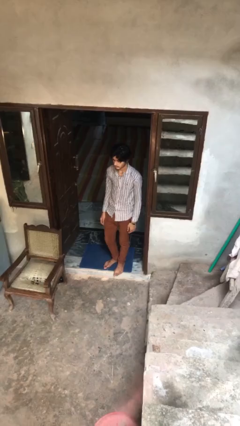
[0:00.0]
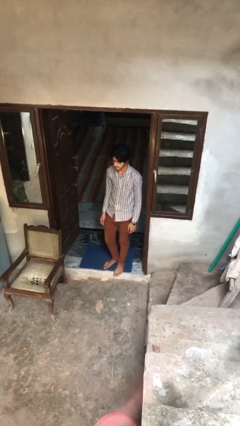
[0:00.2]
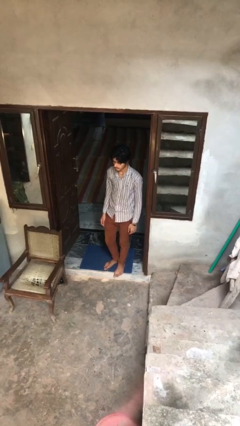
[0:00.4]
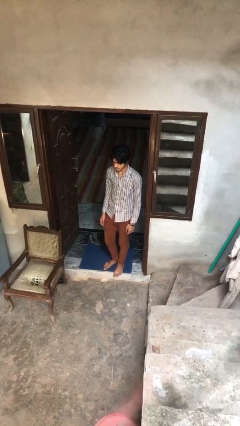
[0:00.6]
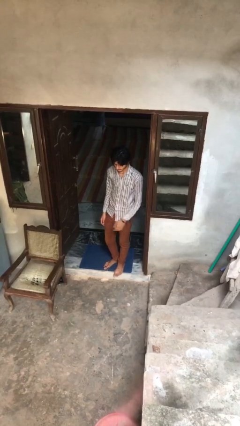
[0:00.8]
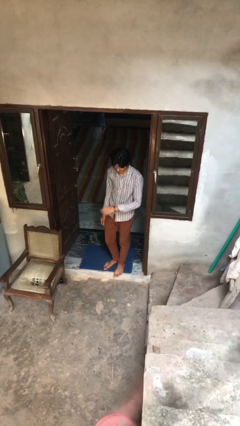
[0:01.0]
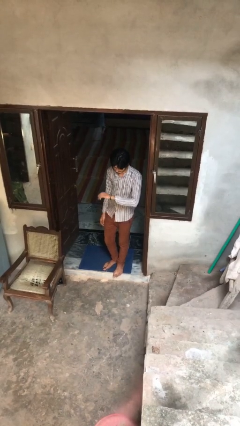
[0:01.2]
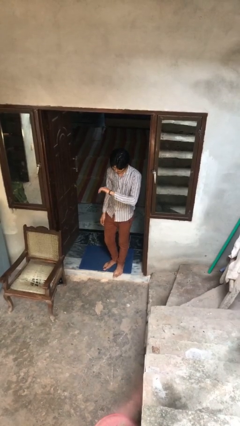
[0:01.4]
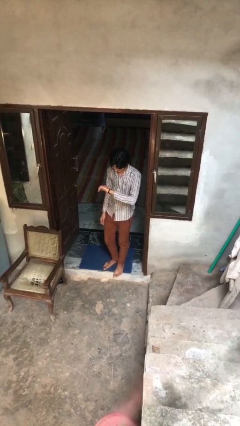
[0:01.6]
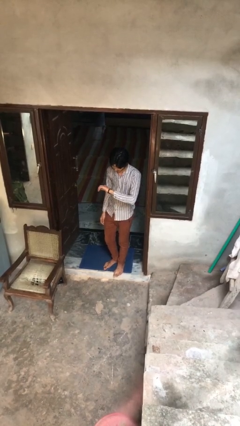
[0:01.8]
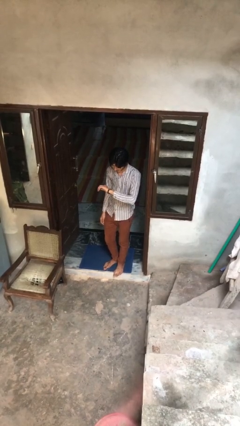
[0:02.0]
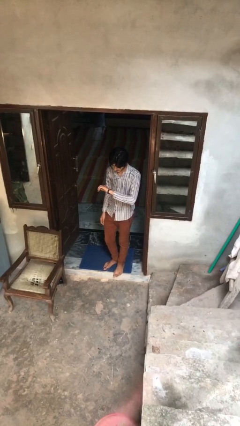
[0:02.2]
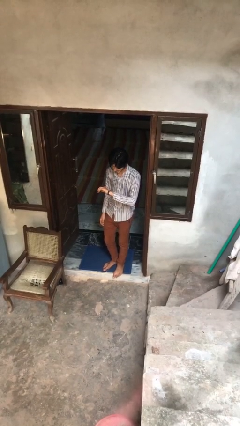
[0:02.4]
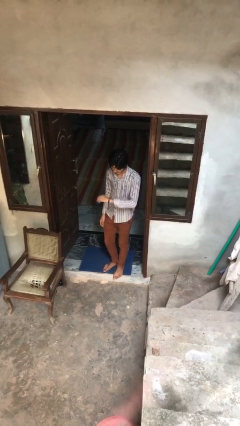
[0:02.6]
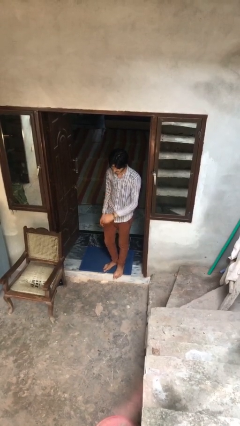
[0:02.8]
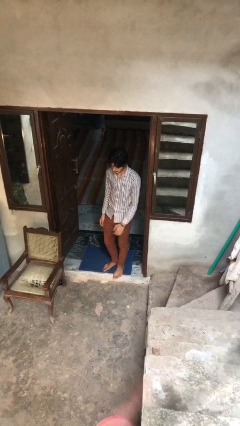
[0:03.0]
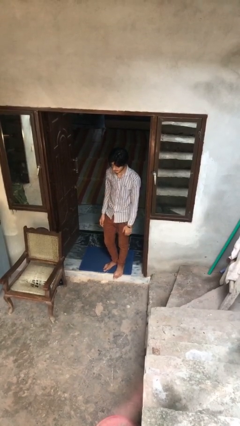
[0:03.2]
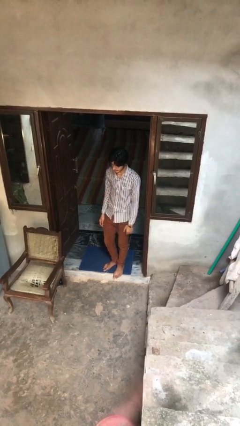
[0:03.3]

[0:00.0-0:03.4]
person looks at wristwatch

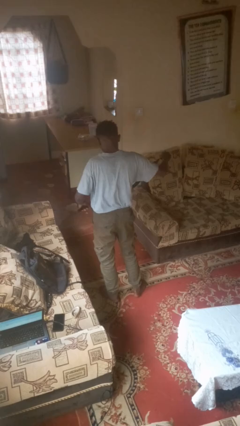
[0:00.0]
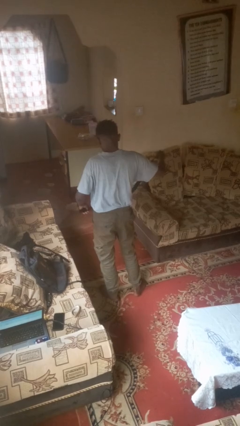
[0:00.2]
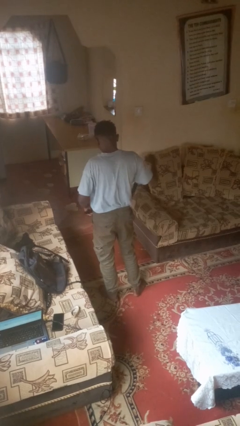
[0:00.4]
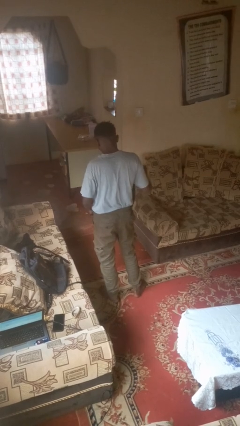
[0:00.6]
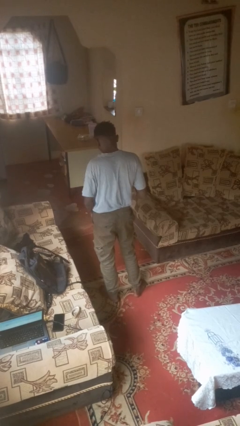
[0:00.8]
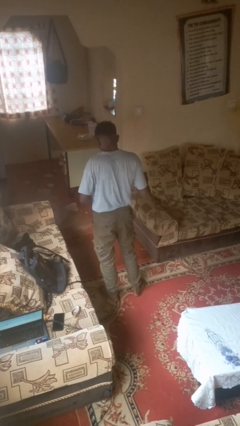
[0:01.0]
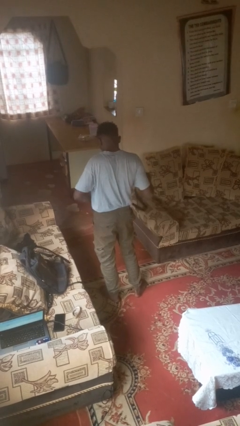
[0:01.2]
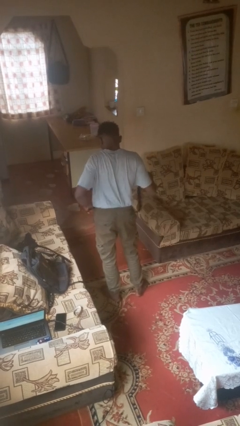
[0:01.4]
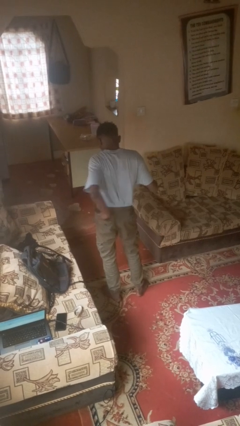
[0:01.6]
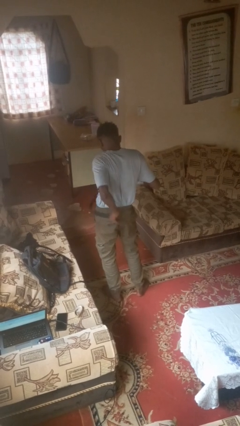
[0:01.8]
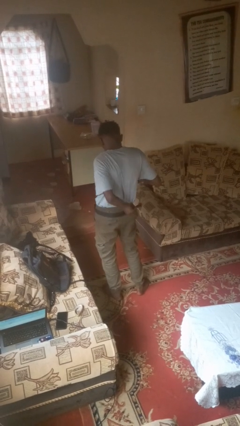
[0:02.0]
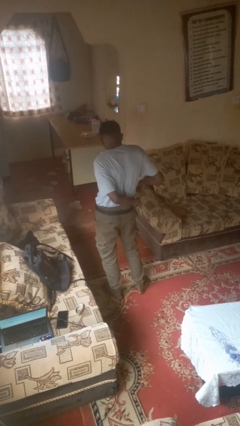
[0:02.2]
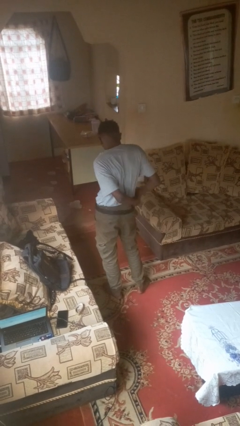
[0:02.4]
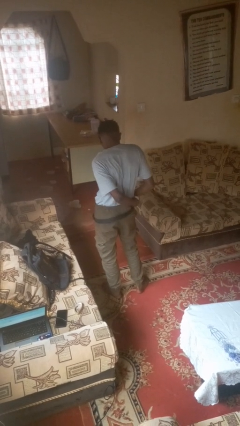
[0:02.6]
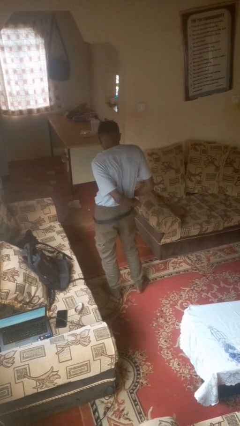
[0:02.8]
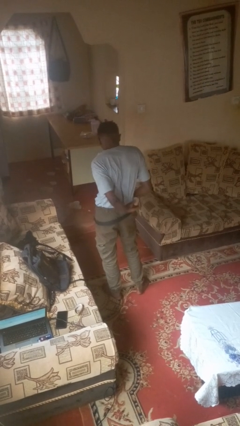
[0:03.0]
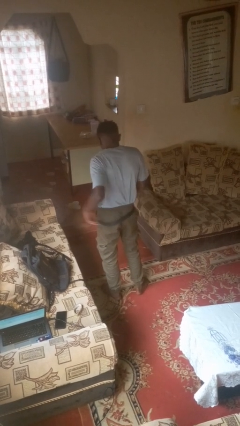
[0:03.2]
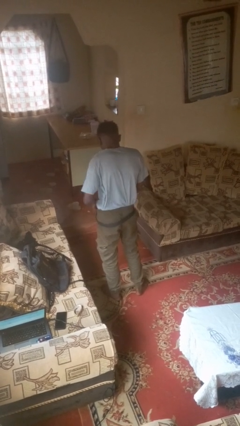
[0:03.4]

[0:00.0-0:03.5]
person puts on belt

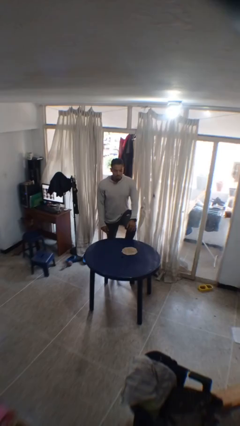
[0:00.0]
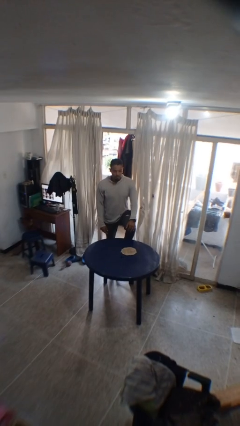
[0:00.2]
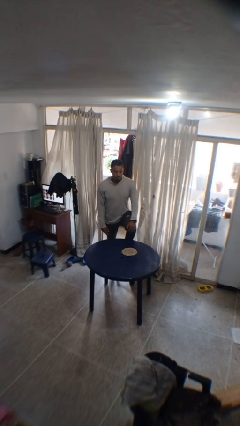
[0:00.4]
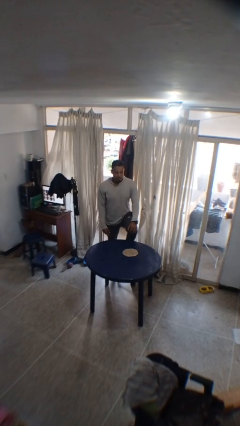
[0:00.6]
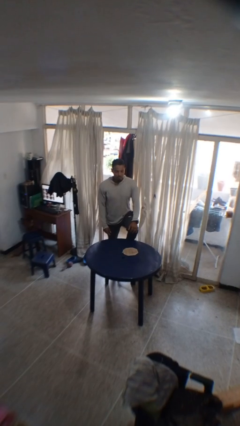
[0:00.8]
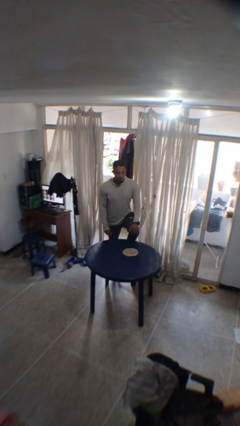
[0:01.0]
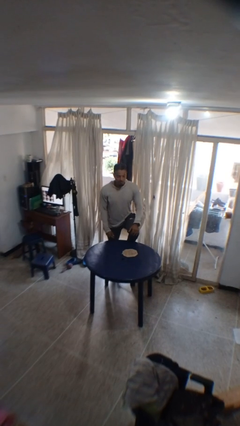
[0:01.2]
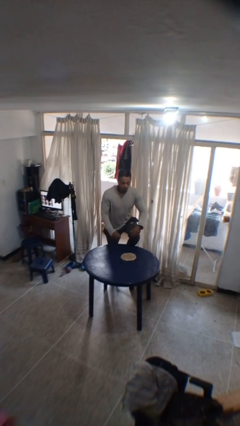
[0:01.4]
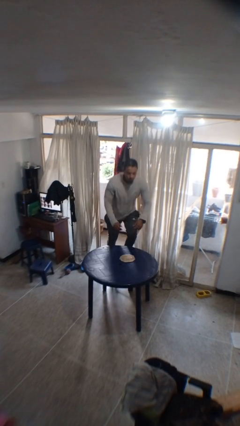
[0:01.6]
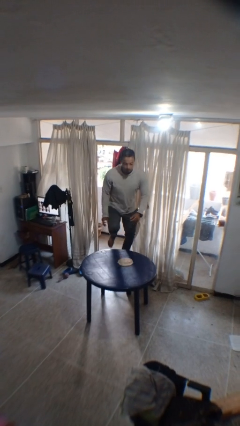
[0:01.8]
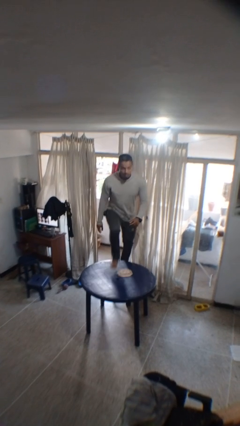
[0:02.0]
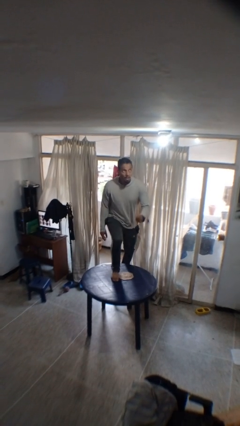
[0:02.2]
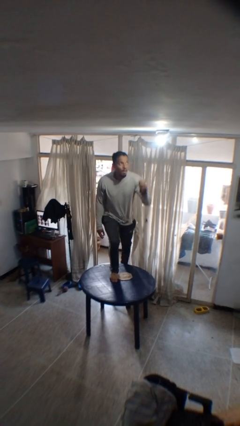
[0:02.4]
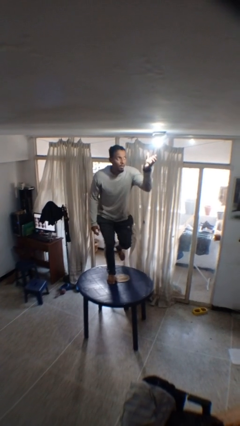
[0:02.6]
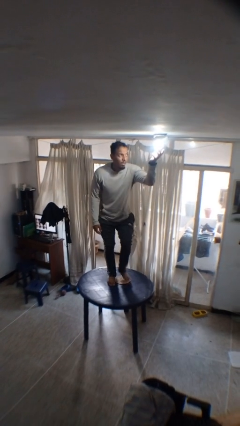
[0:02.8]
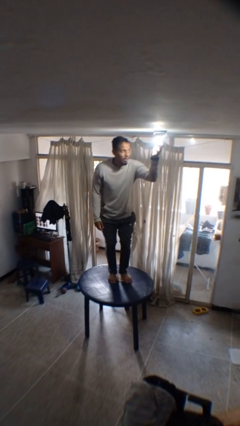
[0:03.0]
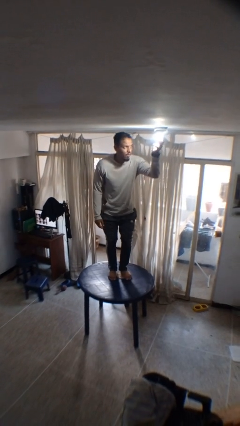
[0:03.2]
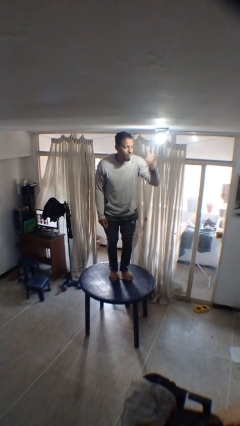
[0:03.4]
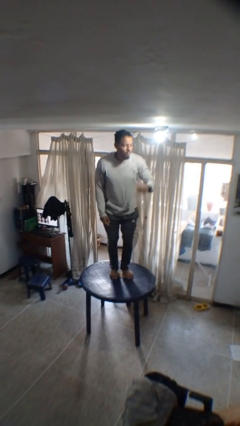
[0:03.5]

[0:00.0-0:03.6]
person climbs on table

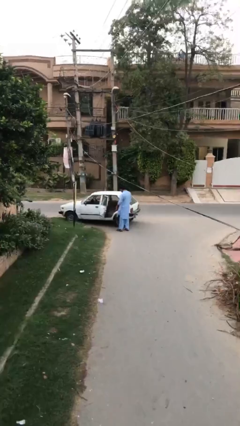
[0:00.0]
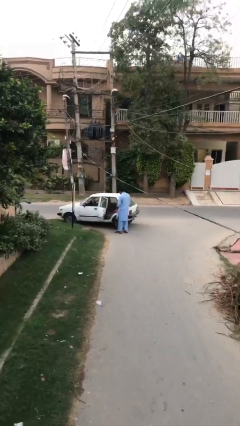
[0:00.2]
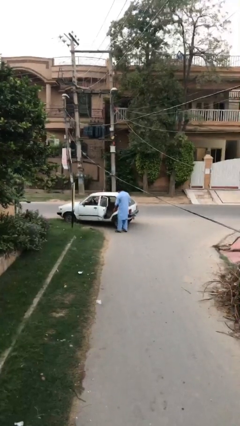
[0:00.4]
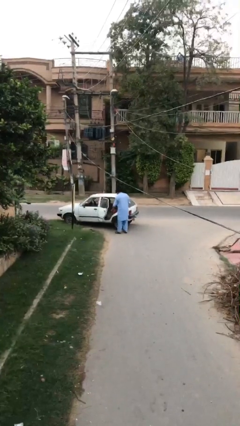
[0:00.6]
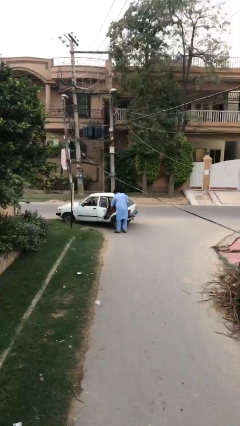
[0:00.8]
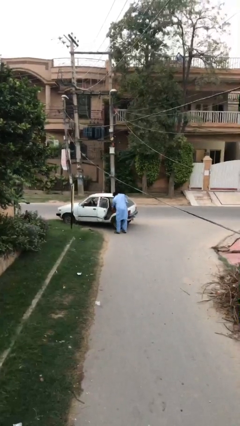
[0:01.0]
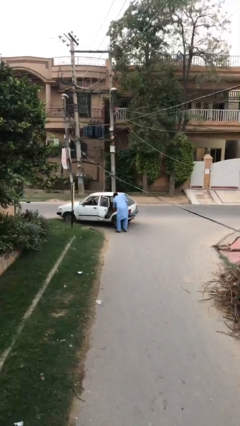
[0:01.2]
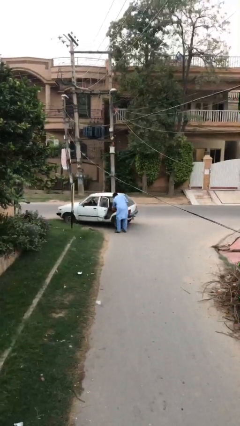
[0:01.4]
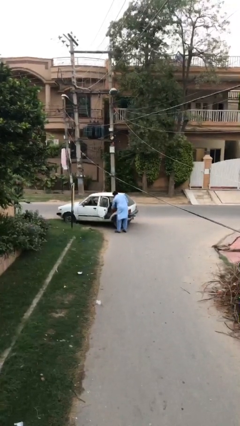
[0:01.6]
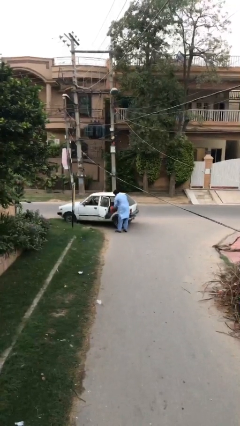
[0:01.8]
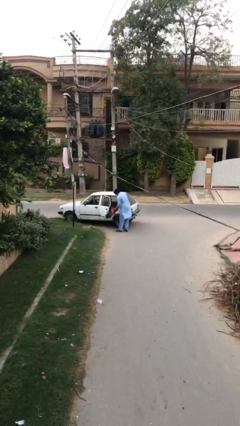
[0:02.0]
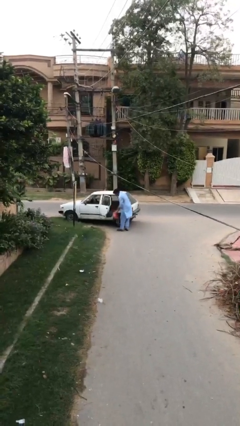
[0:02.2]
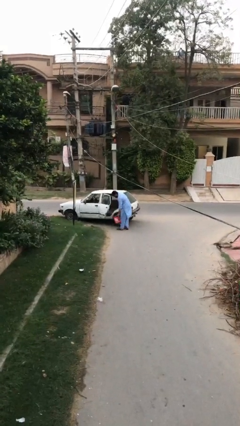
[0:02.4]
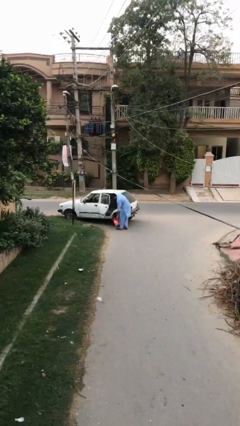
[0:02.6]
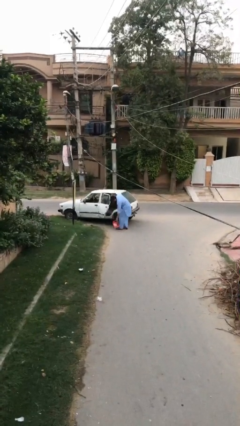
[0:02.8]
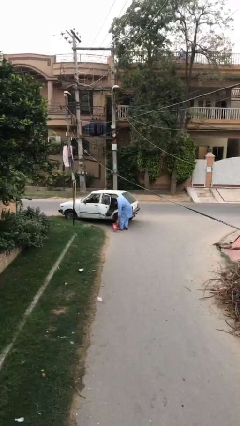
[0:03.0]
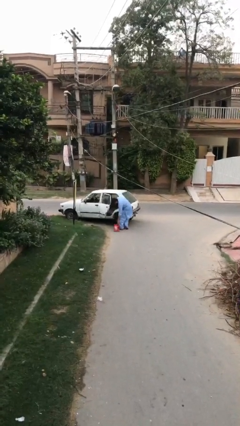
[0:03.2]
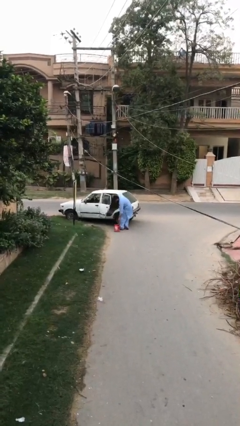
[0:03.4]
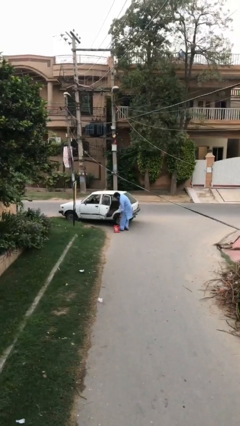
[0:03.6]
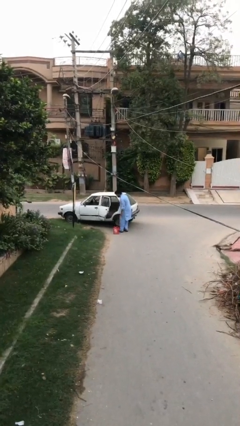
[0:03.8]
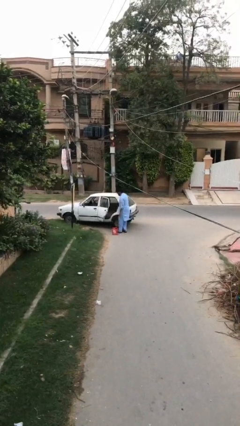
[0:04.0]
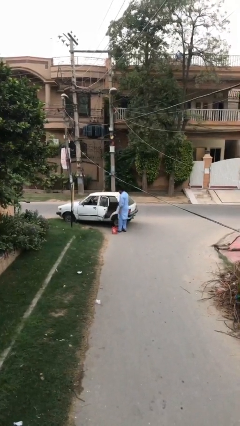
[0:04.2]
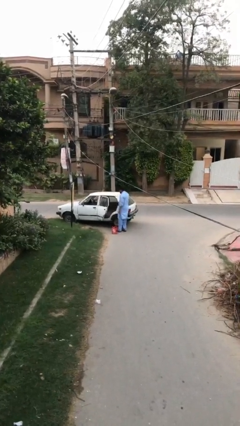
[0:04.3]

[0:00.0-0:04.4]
person unloads car

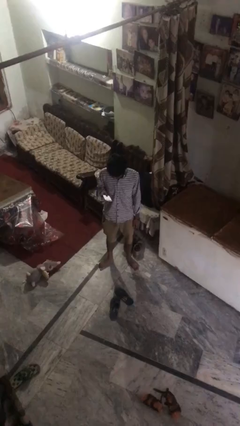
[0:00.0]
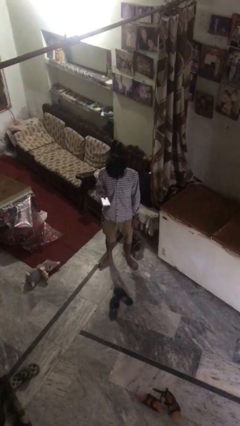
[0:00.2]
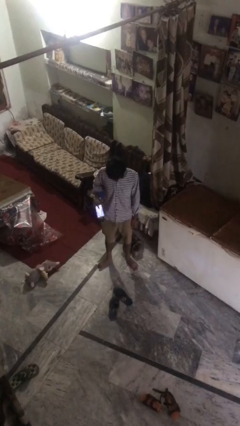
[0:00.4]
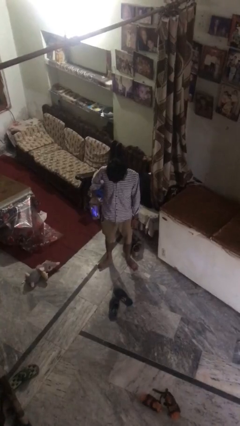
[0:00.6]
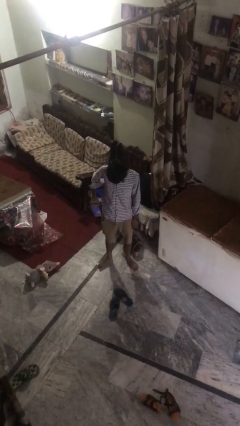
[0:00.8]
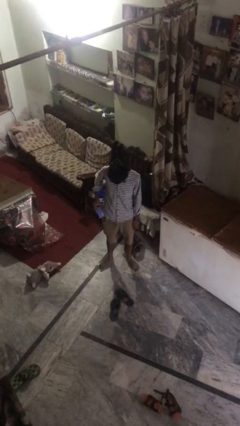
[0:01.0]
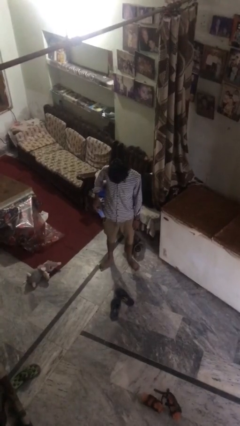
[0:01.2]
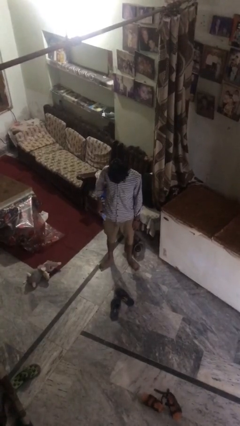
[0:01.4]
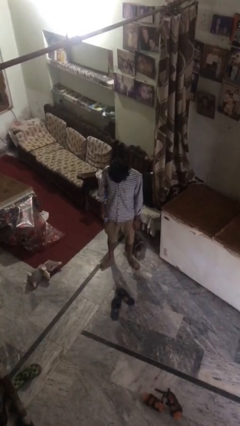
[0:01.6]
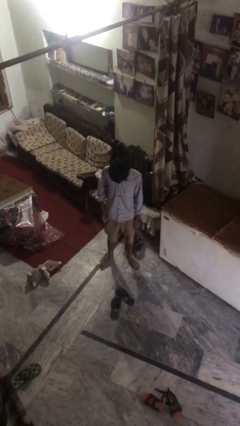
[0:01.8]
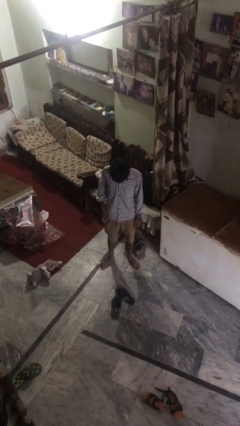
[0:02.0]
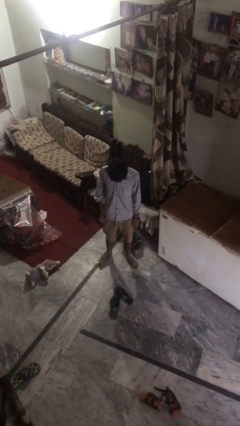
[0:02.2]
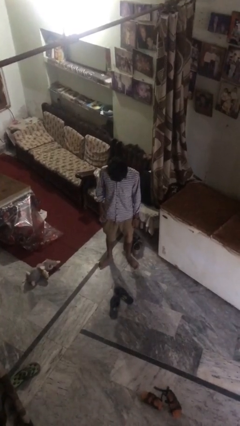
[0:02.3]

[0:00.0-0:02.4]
person puts phone into pocket

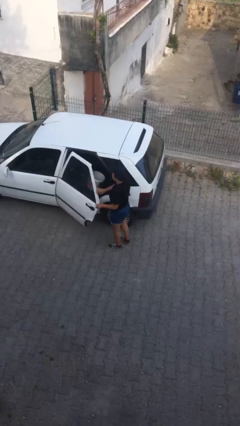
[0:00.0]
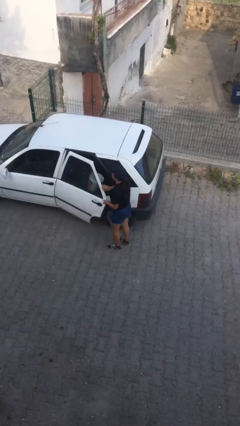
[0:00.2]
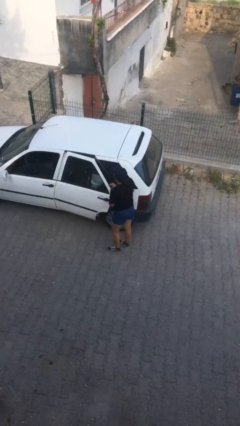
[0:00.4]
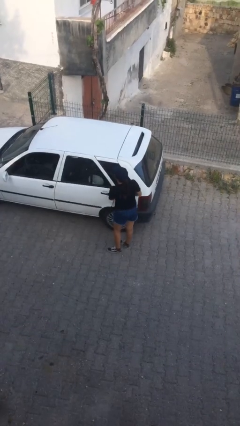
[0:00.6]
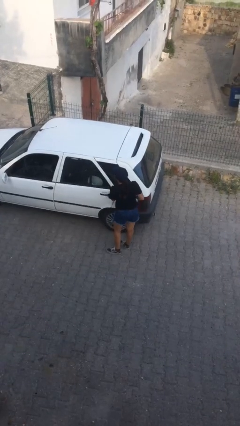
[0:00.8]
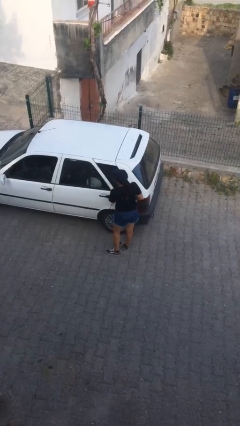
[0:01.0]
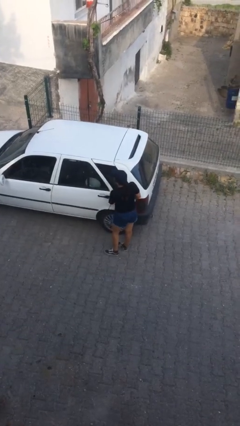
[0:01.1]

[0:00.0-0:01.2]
person closes car door
